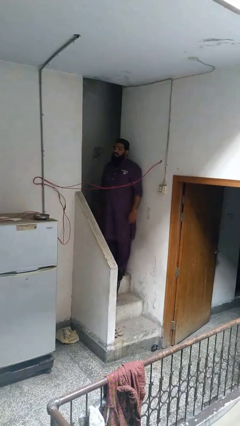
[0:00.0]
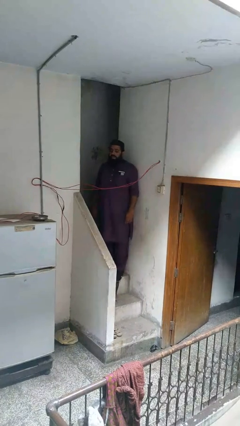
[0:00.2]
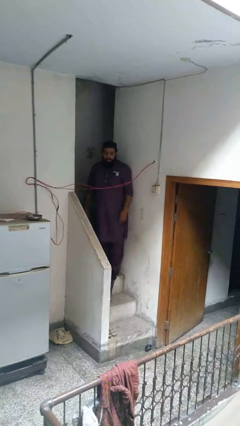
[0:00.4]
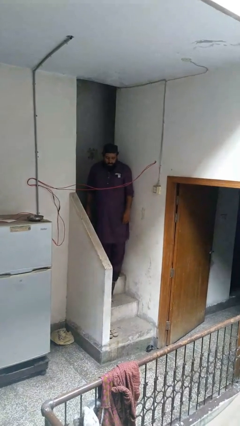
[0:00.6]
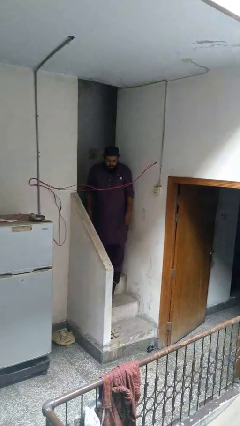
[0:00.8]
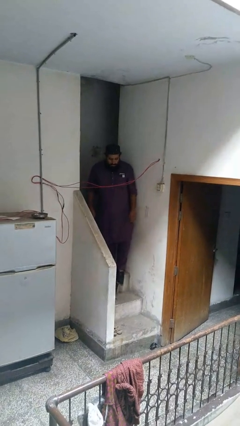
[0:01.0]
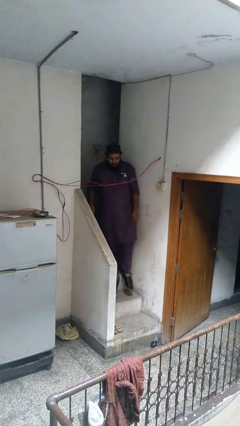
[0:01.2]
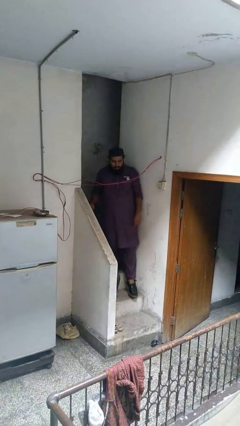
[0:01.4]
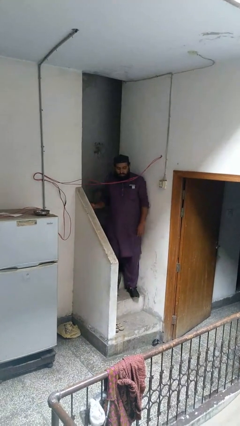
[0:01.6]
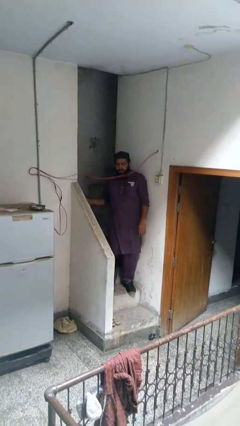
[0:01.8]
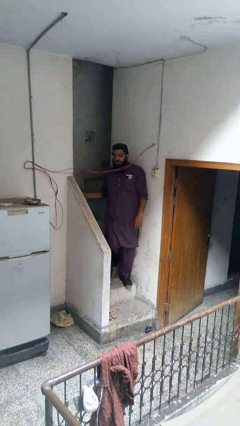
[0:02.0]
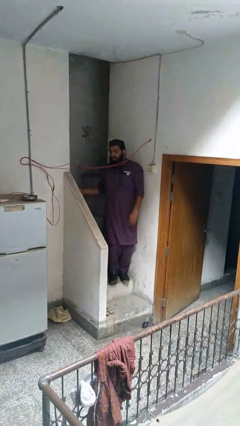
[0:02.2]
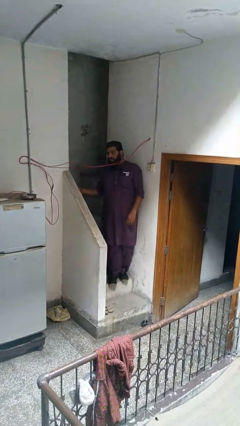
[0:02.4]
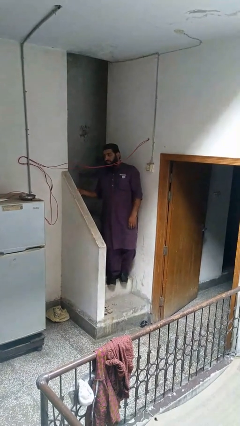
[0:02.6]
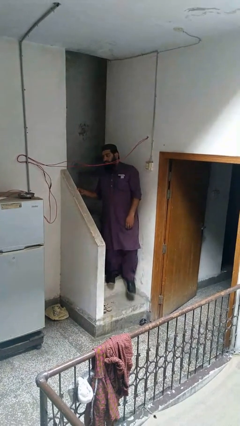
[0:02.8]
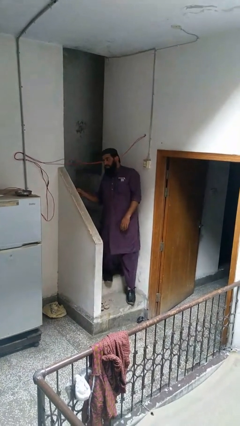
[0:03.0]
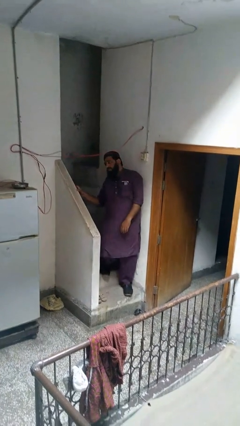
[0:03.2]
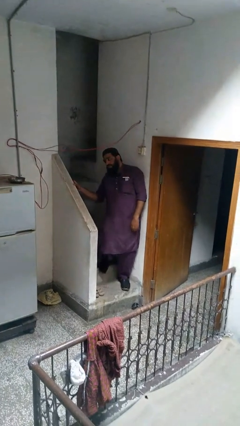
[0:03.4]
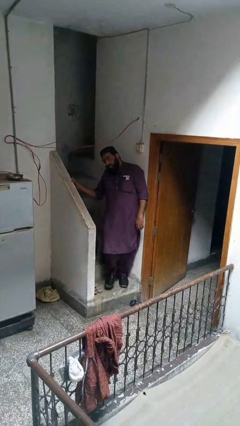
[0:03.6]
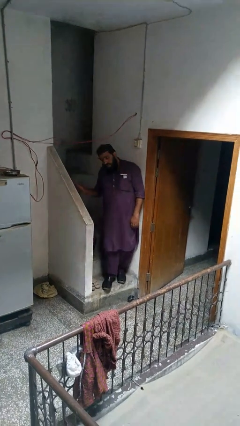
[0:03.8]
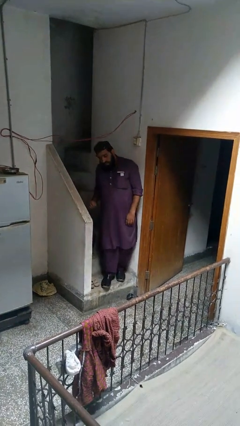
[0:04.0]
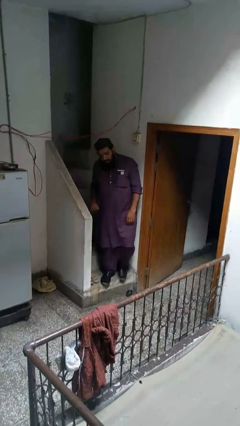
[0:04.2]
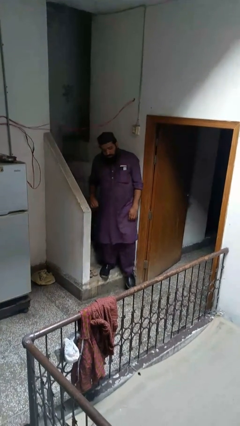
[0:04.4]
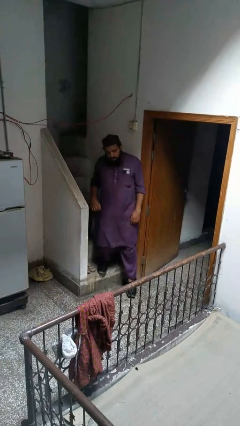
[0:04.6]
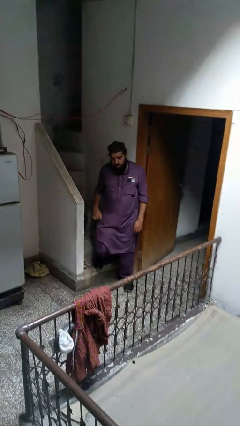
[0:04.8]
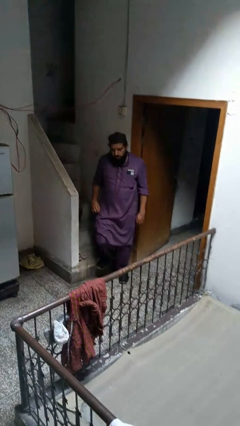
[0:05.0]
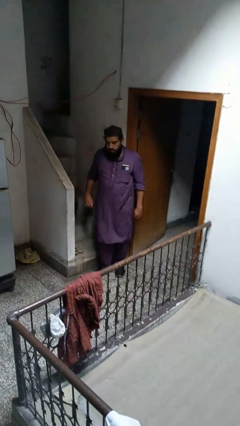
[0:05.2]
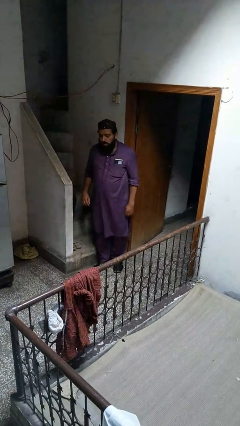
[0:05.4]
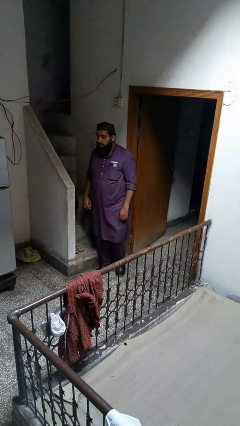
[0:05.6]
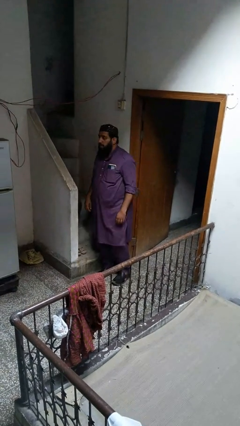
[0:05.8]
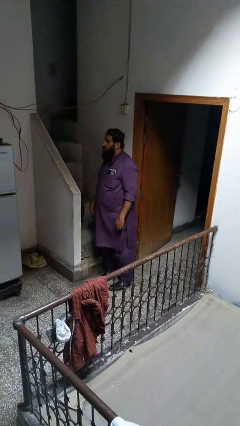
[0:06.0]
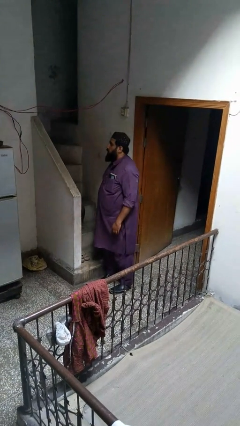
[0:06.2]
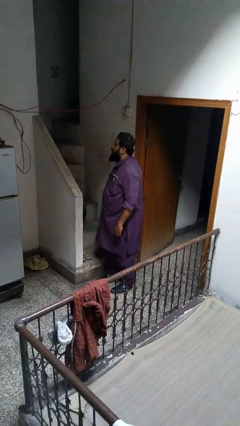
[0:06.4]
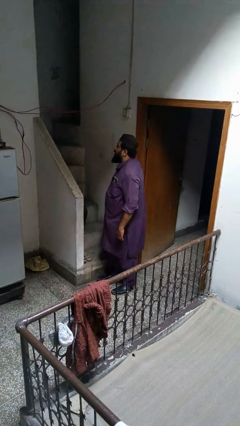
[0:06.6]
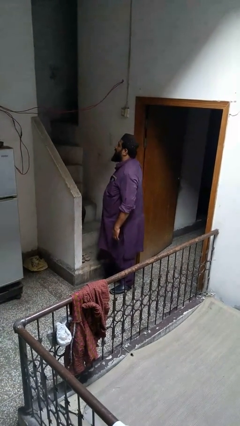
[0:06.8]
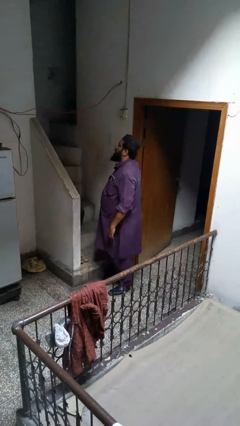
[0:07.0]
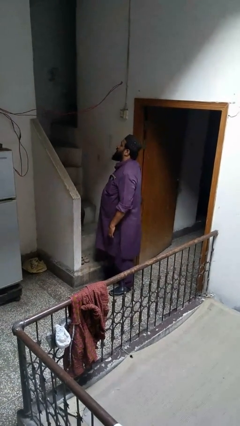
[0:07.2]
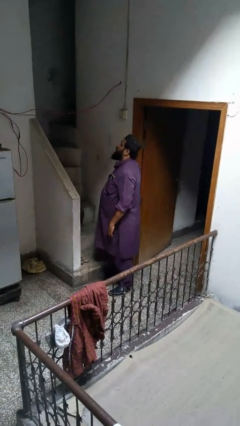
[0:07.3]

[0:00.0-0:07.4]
person climbs down stairs

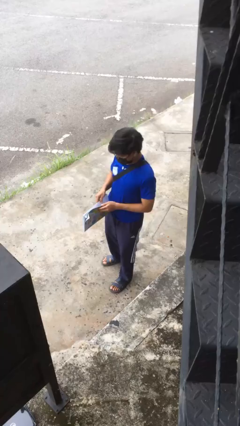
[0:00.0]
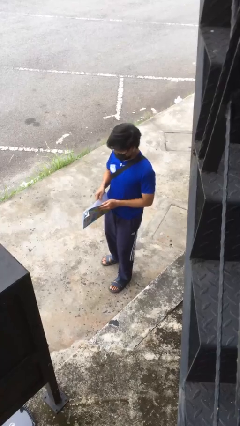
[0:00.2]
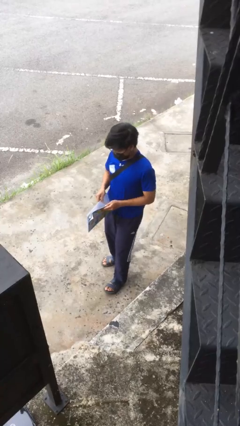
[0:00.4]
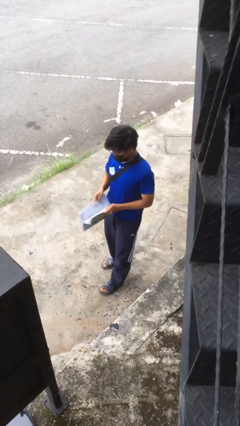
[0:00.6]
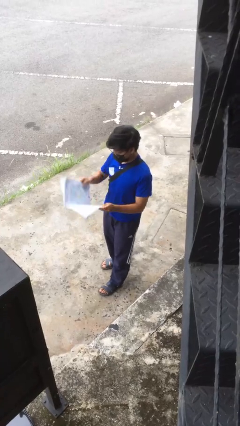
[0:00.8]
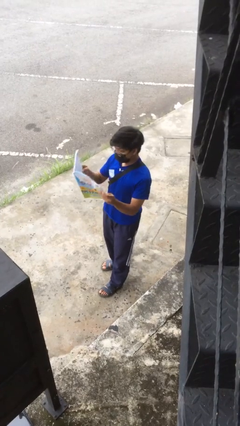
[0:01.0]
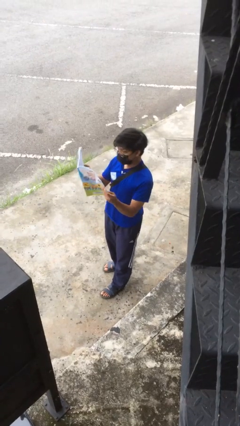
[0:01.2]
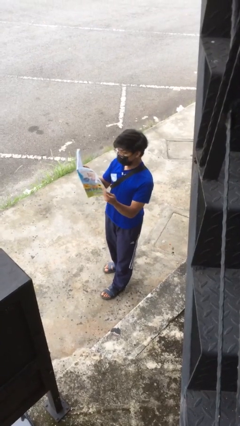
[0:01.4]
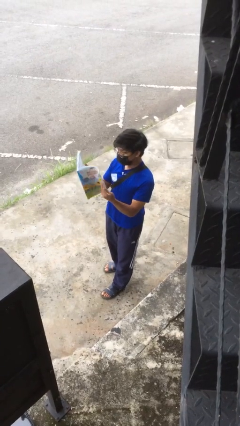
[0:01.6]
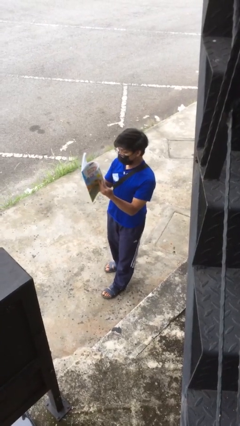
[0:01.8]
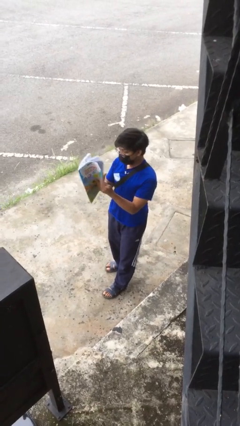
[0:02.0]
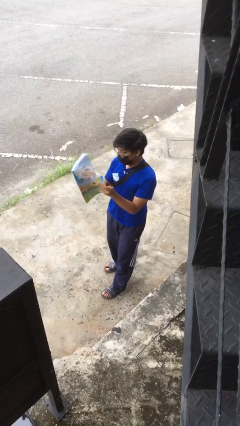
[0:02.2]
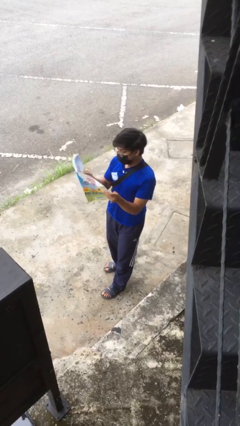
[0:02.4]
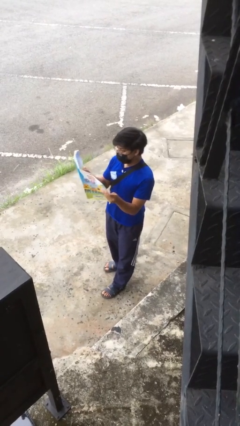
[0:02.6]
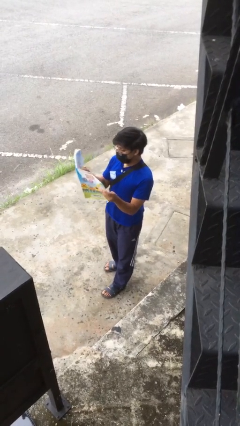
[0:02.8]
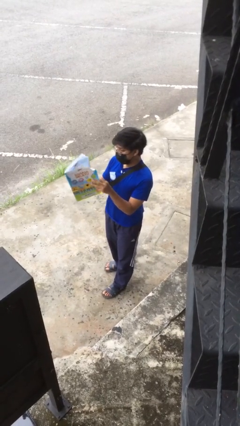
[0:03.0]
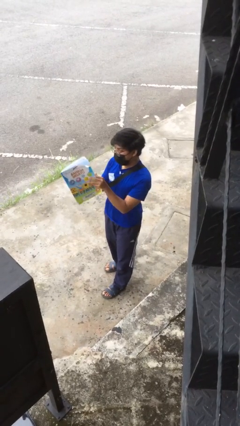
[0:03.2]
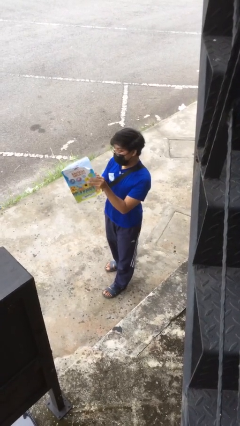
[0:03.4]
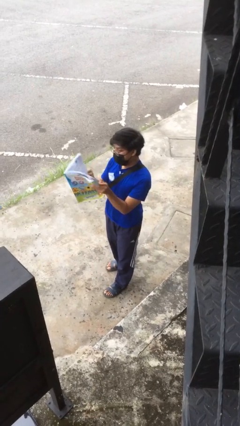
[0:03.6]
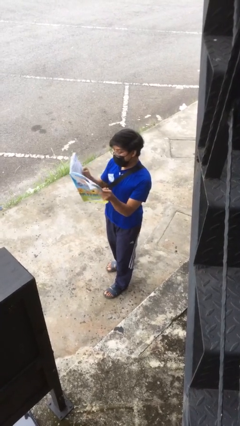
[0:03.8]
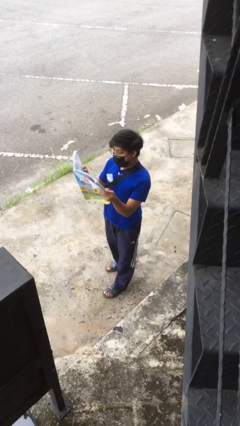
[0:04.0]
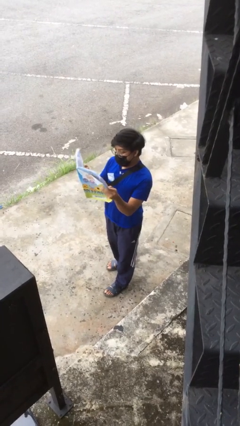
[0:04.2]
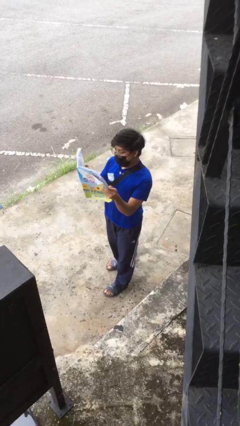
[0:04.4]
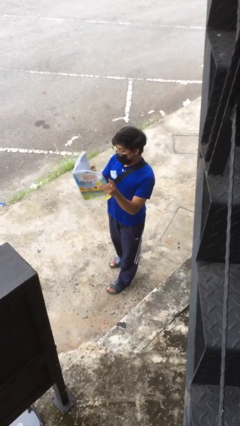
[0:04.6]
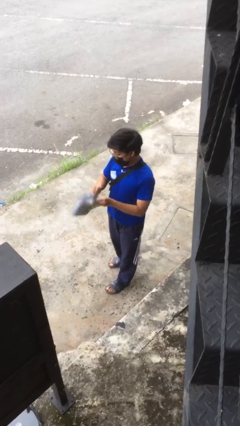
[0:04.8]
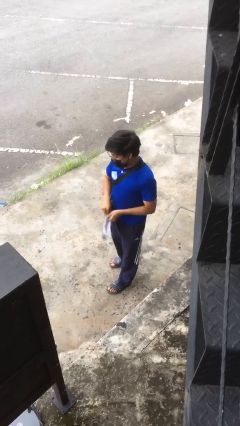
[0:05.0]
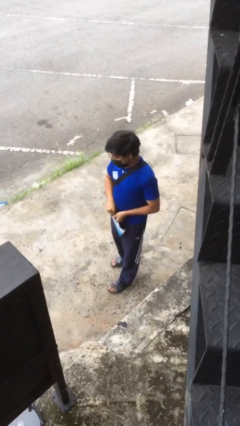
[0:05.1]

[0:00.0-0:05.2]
person reads document

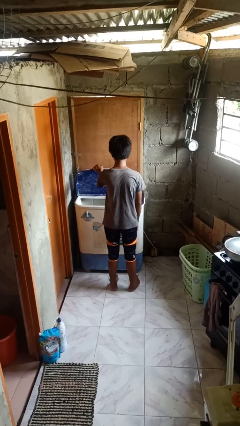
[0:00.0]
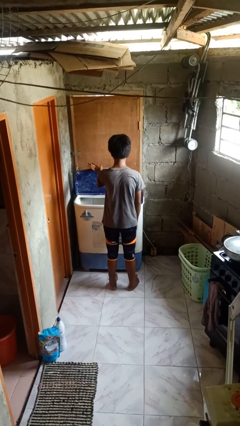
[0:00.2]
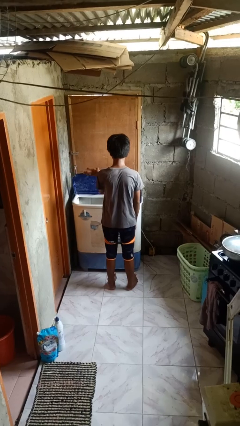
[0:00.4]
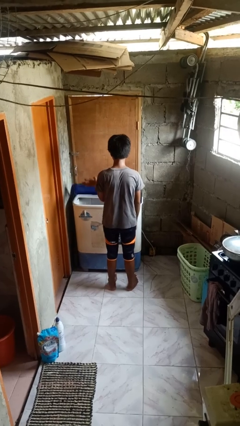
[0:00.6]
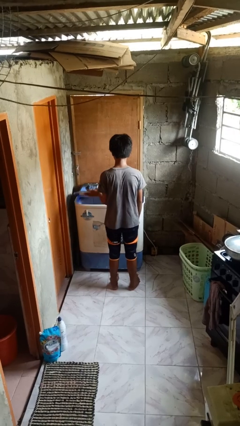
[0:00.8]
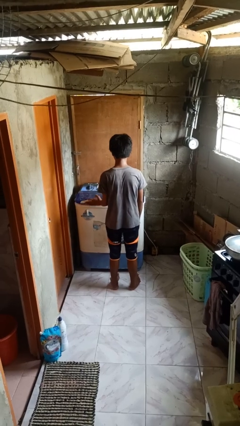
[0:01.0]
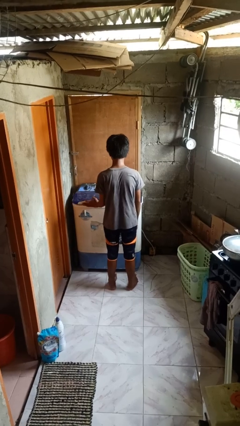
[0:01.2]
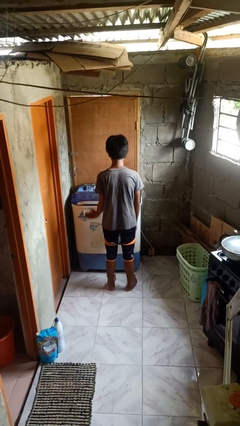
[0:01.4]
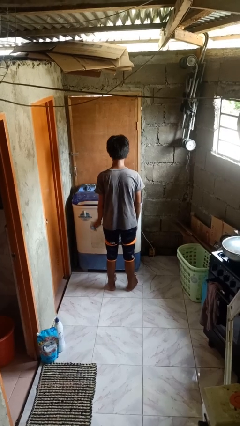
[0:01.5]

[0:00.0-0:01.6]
person closes clothes washer

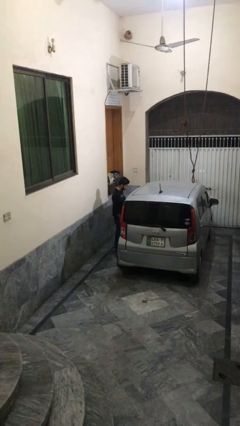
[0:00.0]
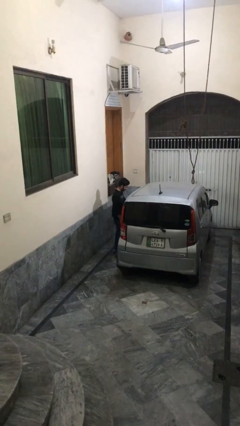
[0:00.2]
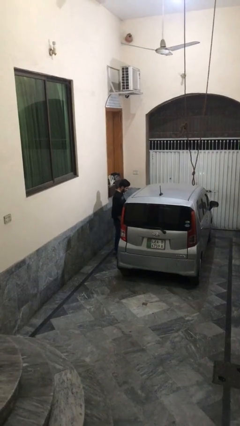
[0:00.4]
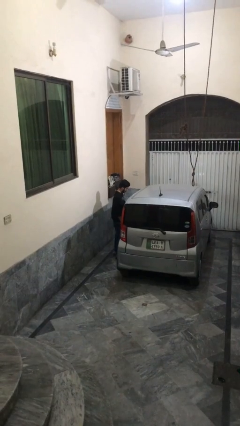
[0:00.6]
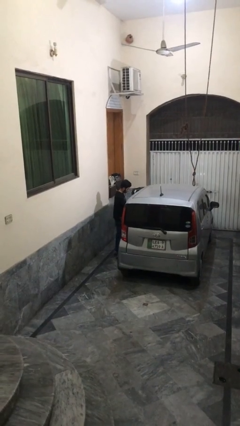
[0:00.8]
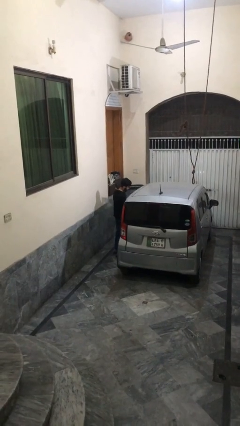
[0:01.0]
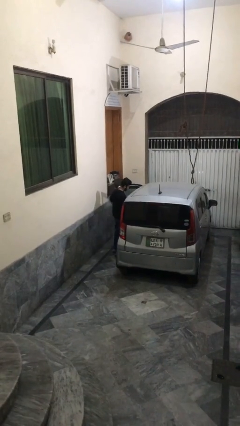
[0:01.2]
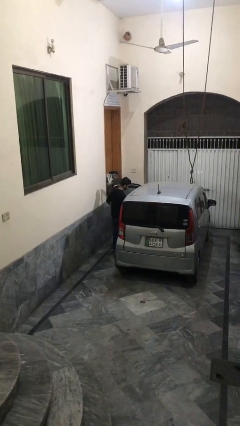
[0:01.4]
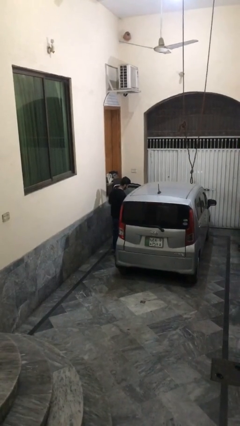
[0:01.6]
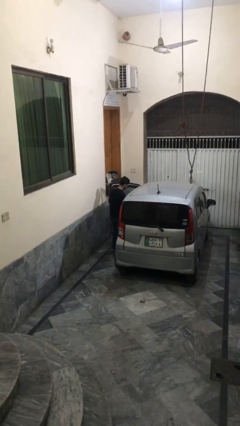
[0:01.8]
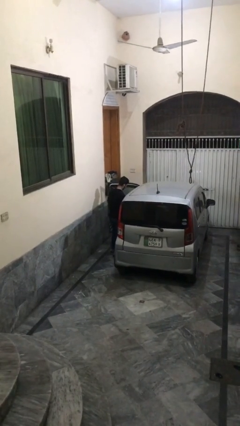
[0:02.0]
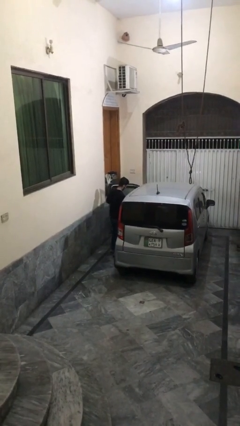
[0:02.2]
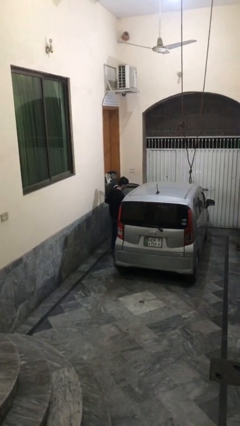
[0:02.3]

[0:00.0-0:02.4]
person opens car door

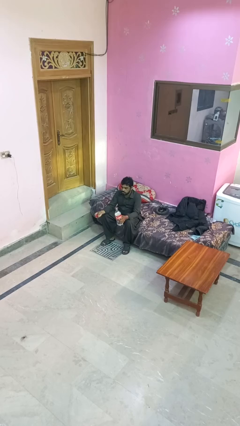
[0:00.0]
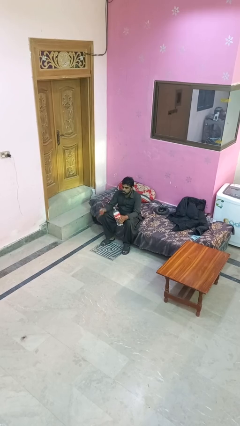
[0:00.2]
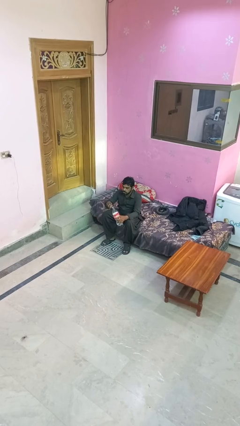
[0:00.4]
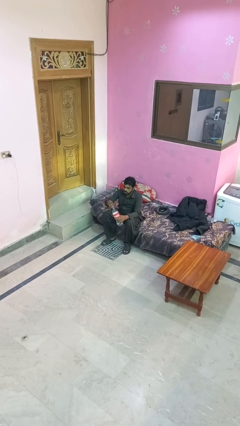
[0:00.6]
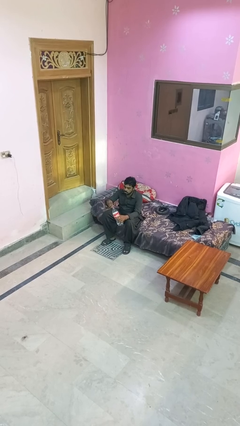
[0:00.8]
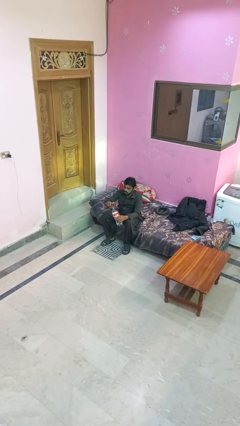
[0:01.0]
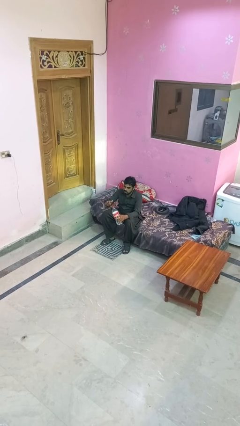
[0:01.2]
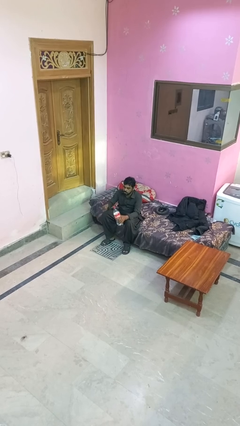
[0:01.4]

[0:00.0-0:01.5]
person screws lid to bottle
